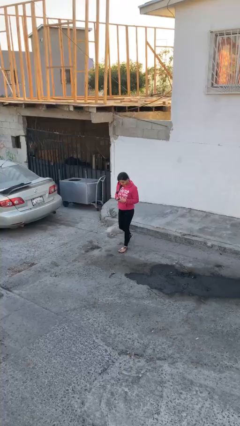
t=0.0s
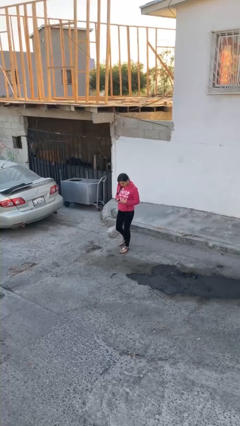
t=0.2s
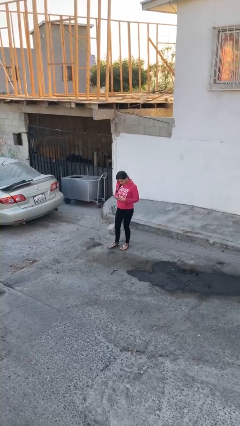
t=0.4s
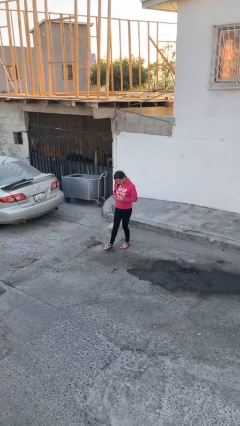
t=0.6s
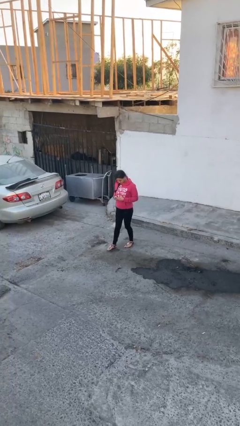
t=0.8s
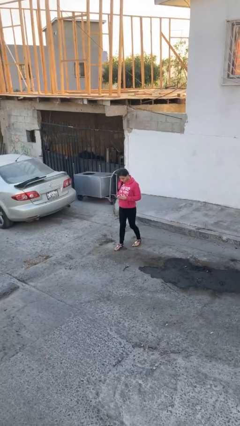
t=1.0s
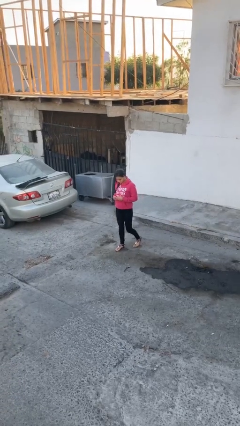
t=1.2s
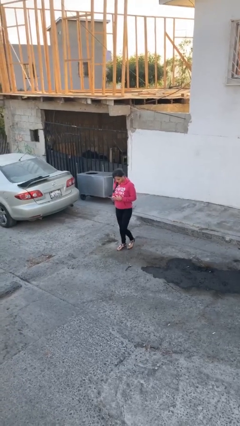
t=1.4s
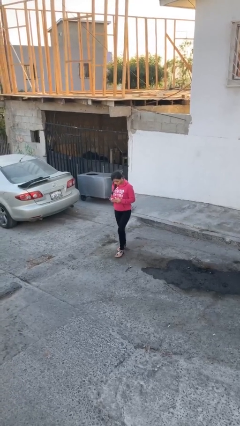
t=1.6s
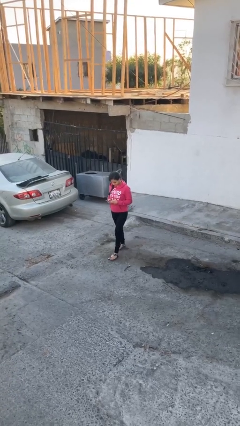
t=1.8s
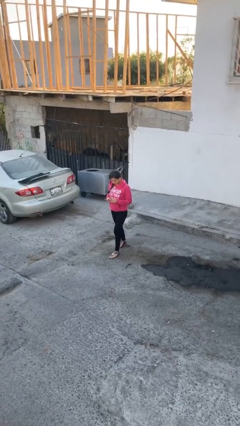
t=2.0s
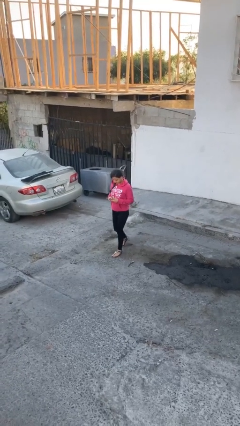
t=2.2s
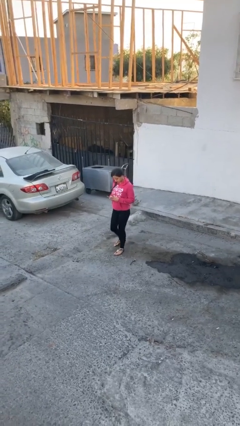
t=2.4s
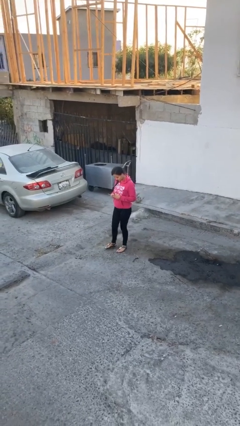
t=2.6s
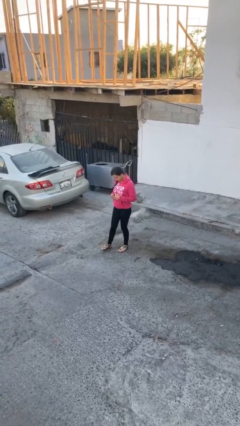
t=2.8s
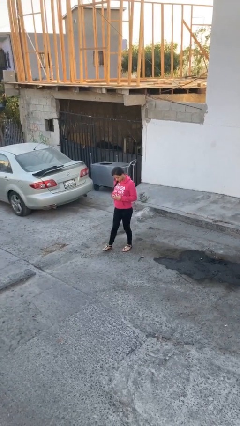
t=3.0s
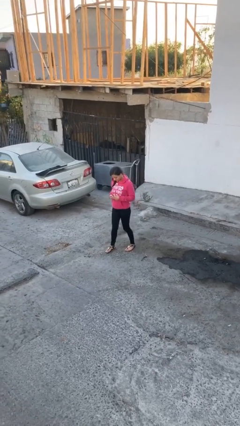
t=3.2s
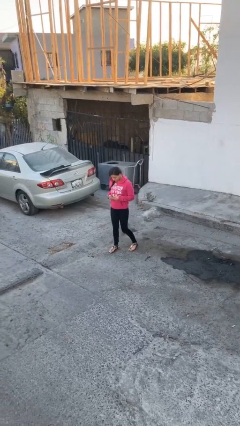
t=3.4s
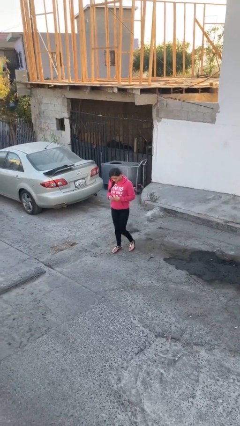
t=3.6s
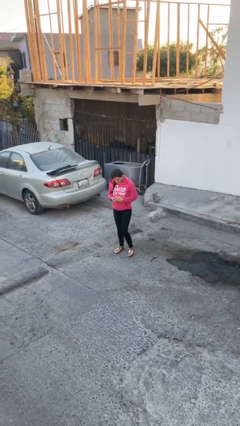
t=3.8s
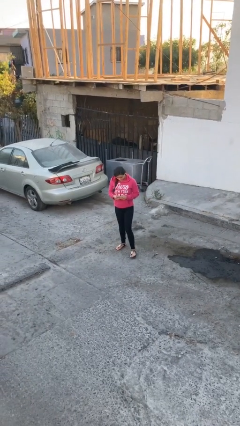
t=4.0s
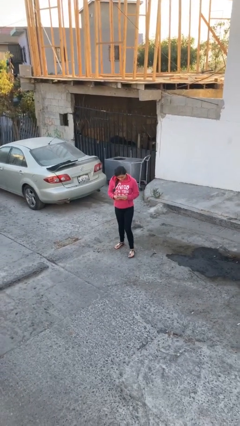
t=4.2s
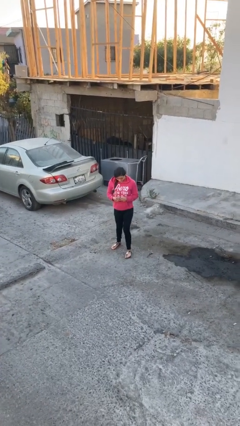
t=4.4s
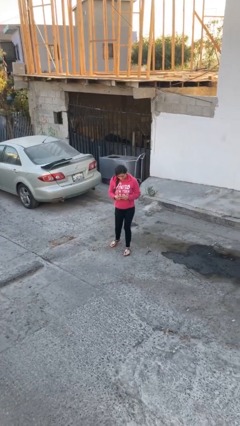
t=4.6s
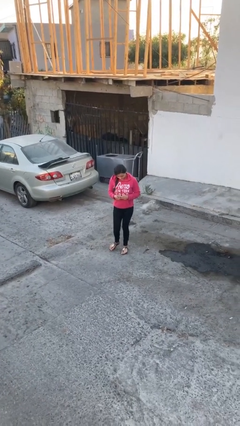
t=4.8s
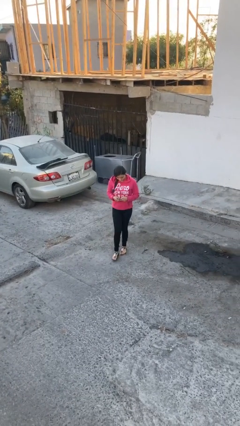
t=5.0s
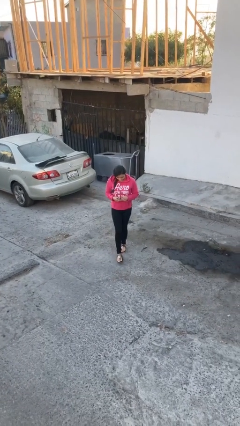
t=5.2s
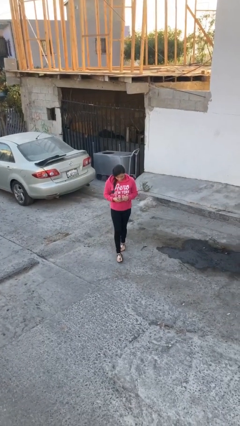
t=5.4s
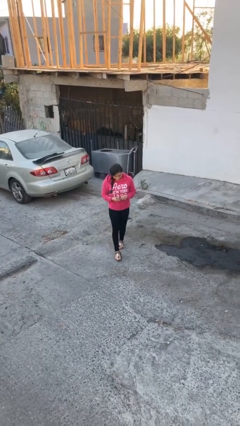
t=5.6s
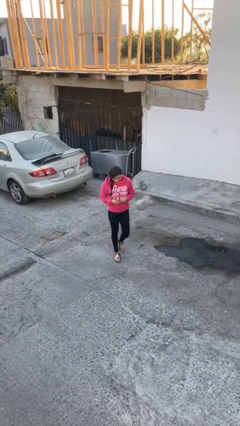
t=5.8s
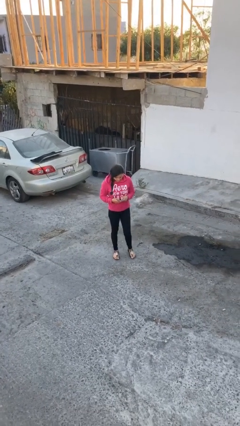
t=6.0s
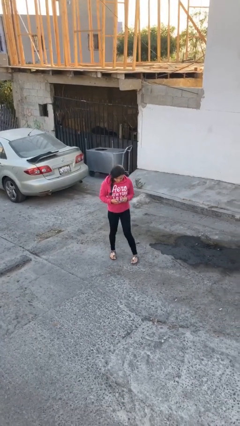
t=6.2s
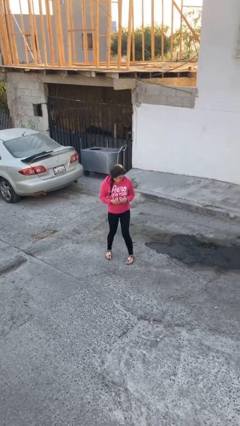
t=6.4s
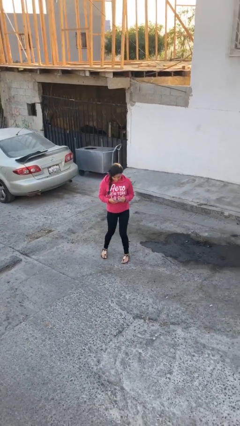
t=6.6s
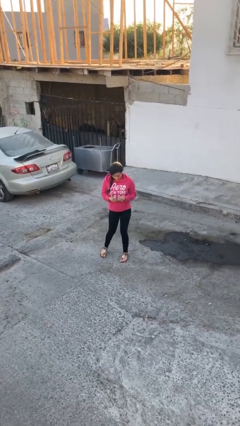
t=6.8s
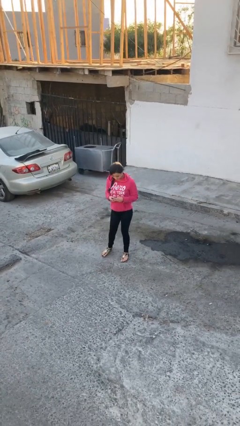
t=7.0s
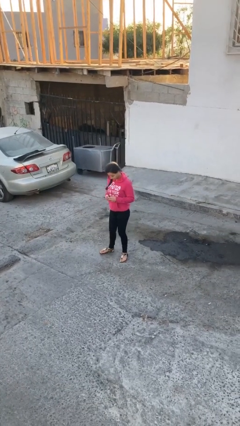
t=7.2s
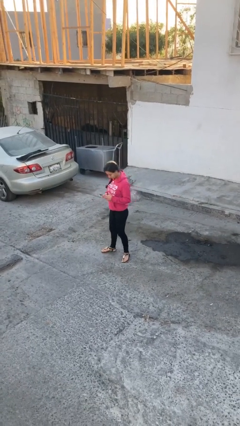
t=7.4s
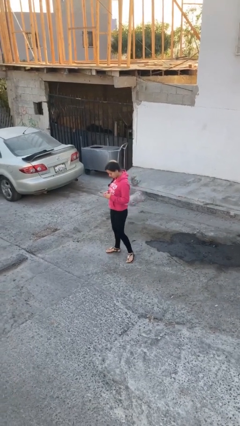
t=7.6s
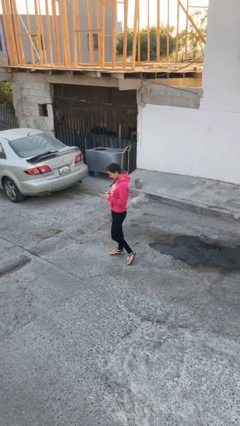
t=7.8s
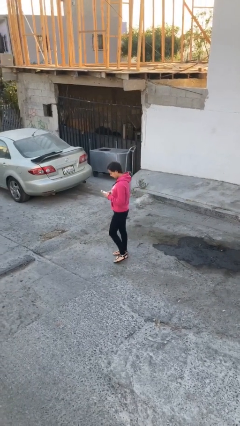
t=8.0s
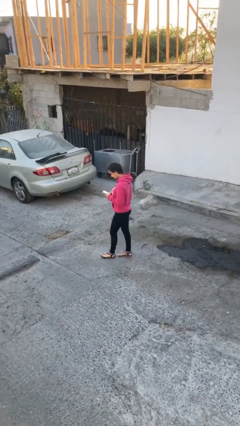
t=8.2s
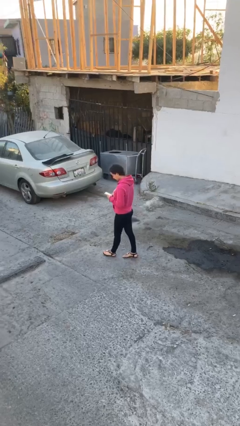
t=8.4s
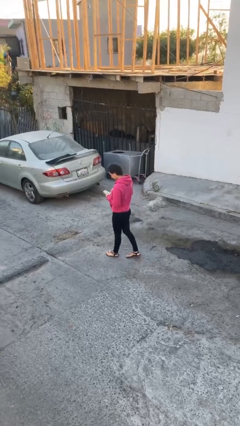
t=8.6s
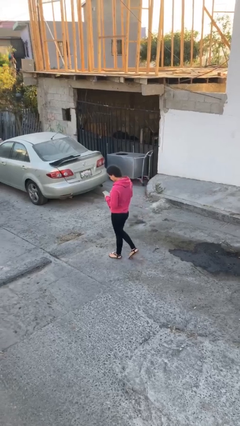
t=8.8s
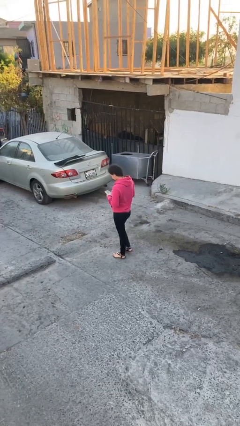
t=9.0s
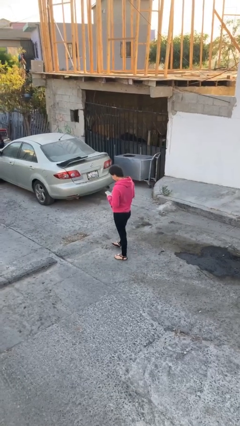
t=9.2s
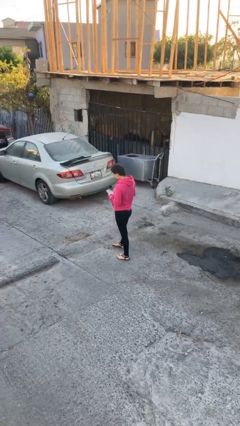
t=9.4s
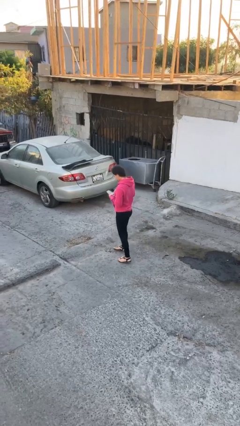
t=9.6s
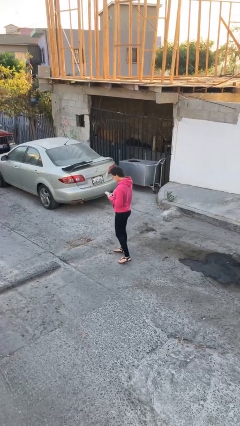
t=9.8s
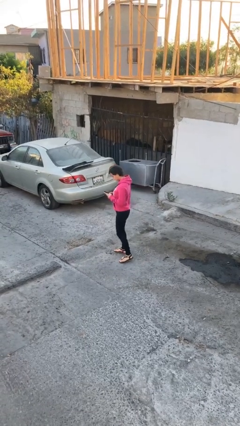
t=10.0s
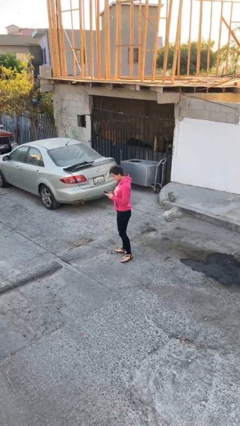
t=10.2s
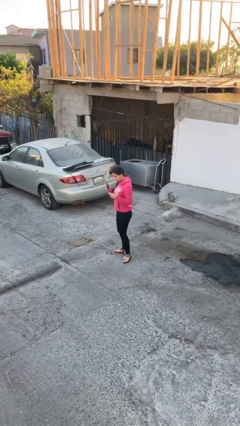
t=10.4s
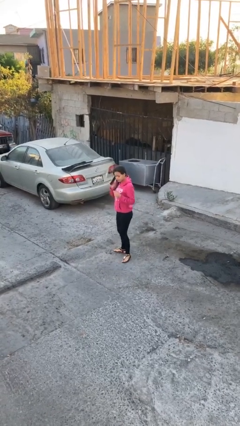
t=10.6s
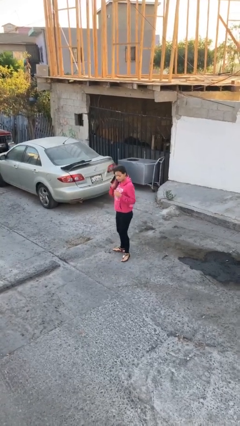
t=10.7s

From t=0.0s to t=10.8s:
person texts on phone

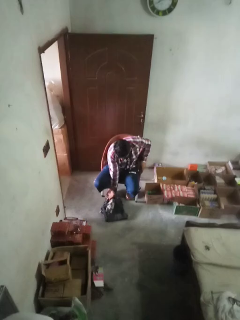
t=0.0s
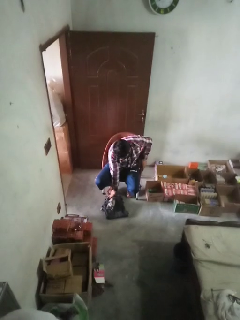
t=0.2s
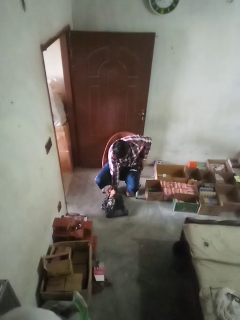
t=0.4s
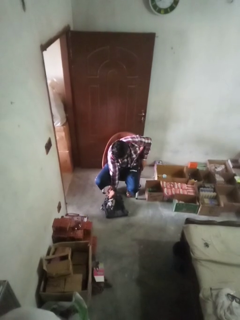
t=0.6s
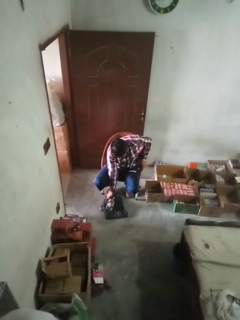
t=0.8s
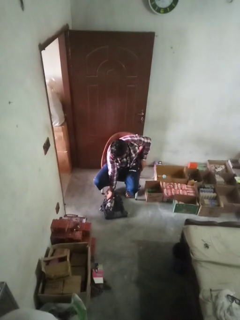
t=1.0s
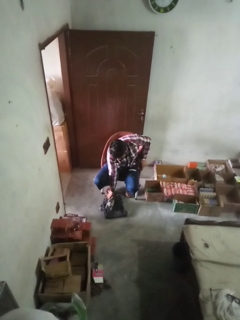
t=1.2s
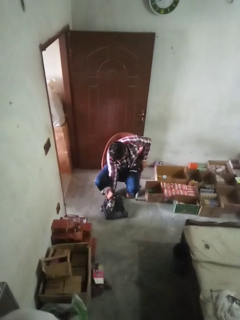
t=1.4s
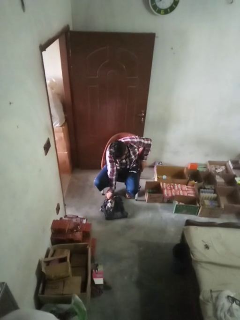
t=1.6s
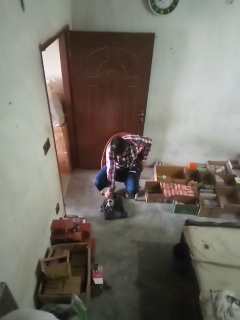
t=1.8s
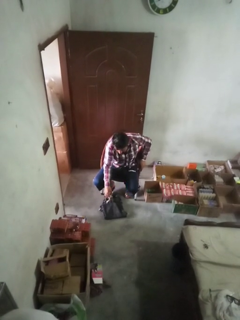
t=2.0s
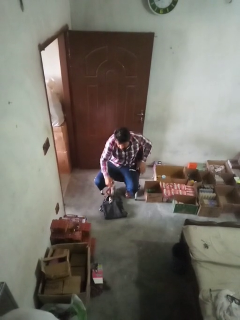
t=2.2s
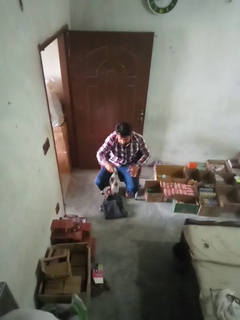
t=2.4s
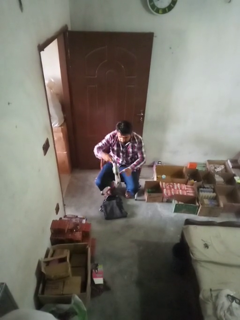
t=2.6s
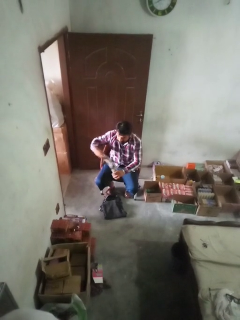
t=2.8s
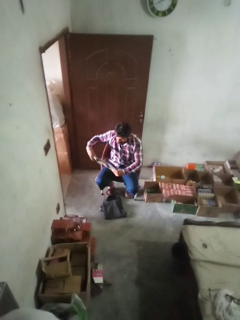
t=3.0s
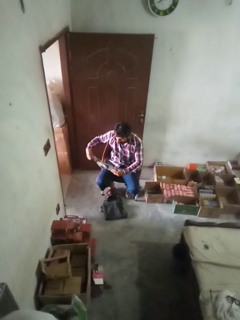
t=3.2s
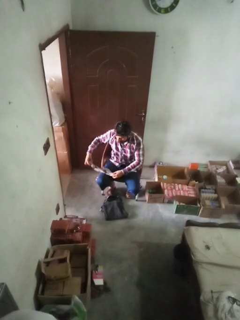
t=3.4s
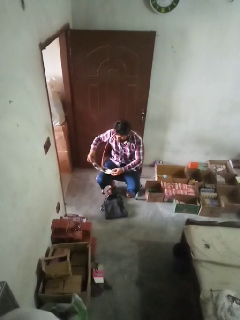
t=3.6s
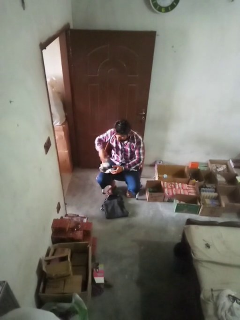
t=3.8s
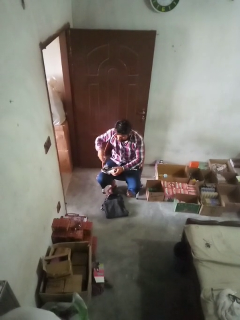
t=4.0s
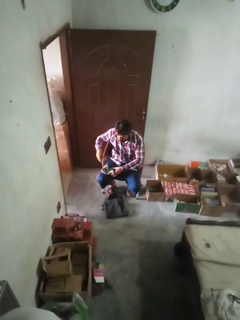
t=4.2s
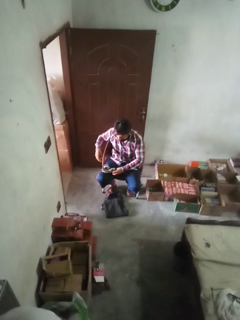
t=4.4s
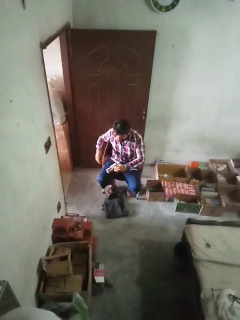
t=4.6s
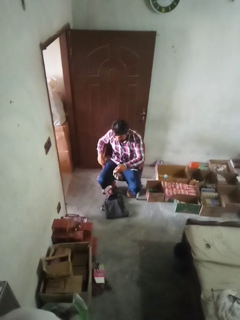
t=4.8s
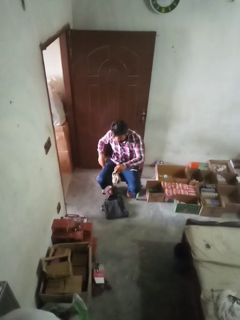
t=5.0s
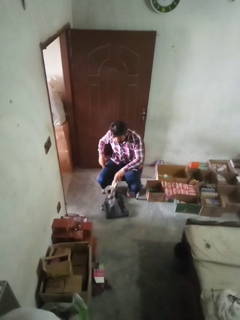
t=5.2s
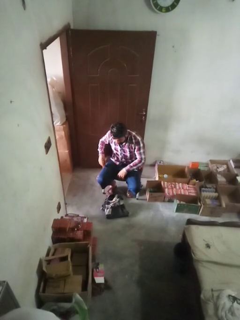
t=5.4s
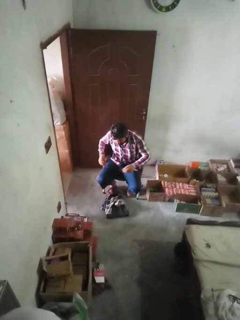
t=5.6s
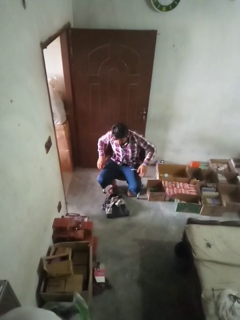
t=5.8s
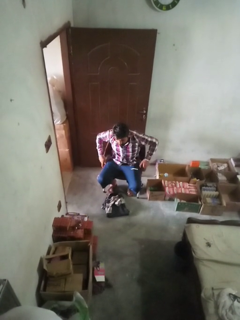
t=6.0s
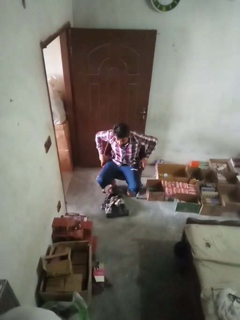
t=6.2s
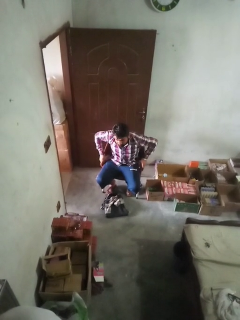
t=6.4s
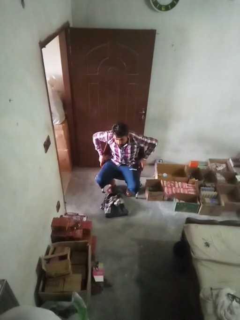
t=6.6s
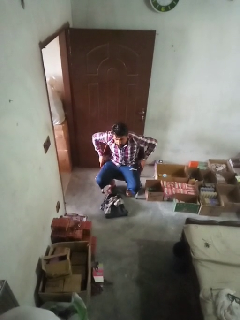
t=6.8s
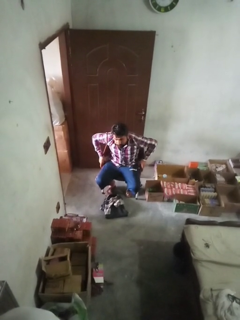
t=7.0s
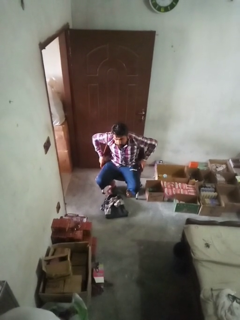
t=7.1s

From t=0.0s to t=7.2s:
person folds socks

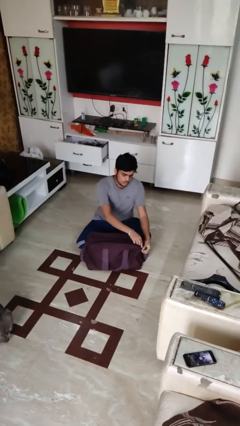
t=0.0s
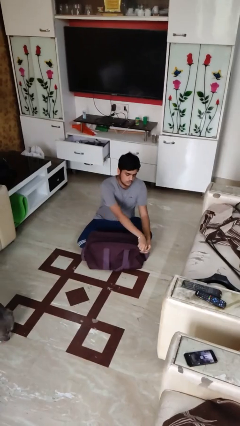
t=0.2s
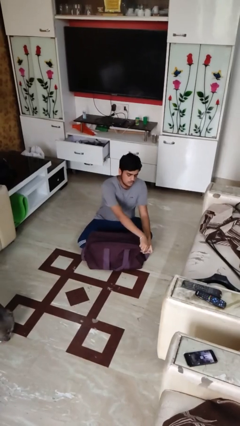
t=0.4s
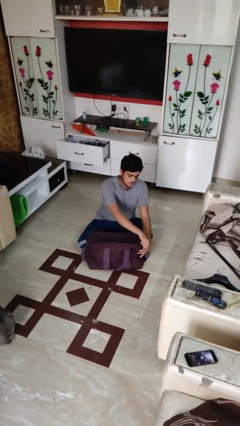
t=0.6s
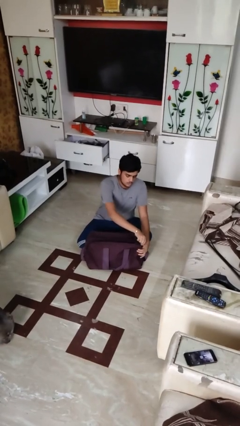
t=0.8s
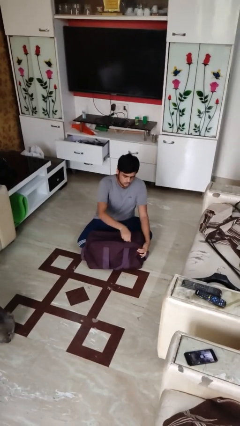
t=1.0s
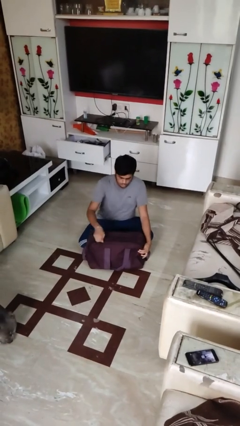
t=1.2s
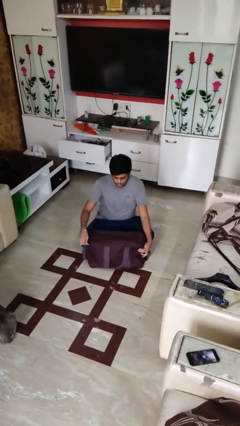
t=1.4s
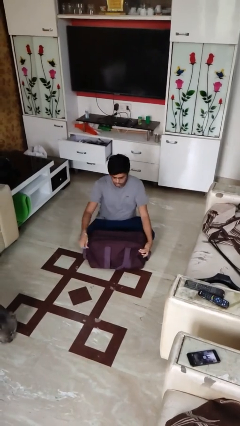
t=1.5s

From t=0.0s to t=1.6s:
person closes suitcase

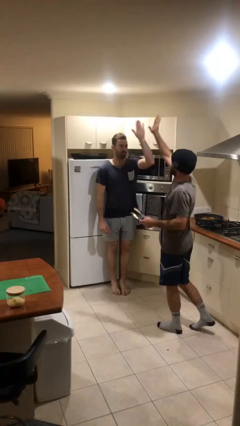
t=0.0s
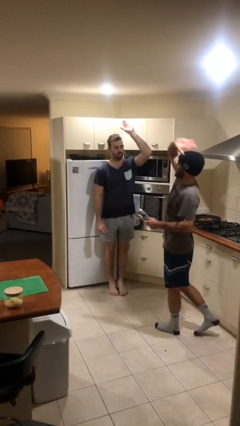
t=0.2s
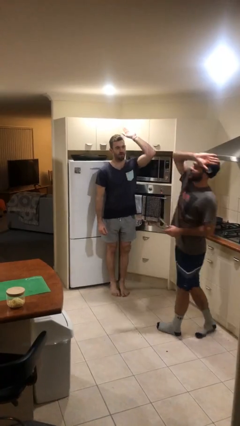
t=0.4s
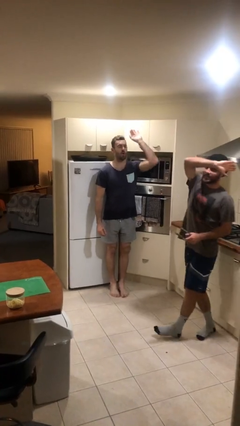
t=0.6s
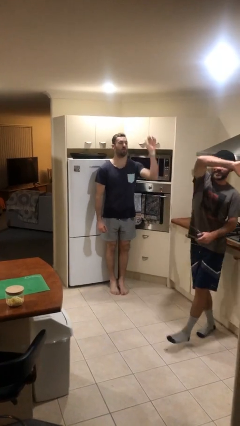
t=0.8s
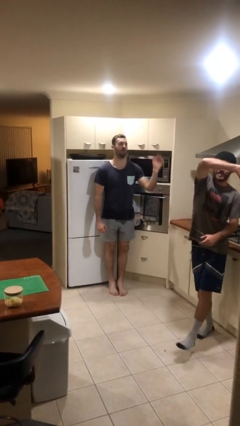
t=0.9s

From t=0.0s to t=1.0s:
person highfives hand
